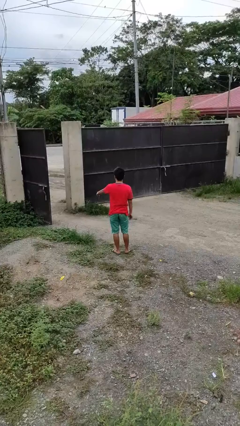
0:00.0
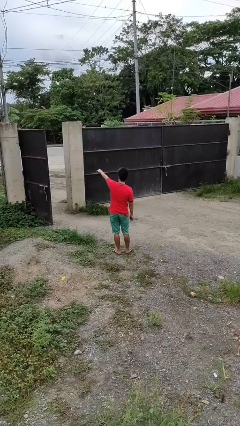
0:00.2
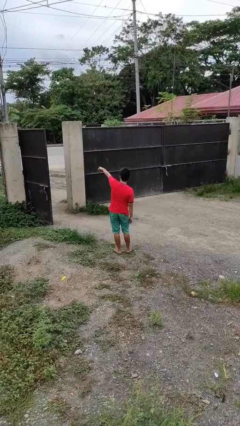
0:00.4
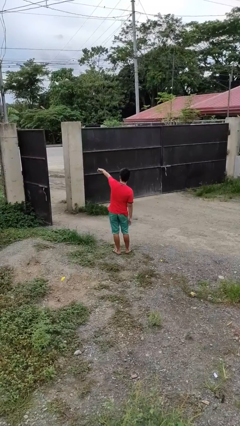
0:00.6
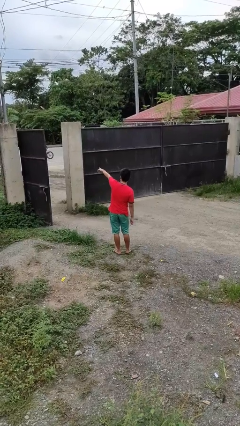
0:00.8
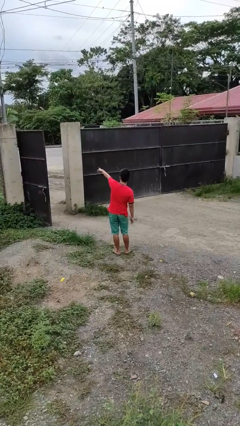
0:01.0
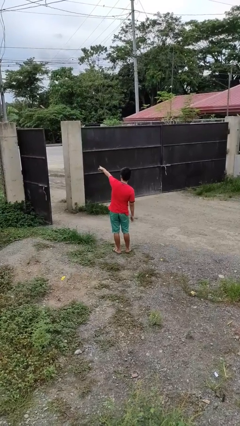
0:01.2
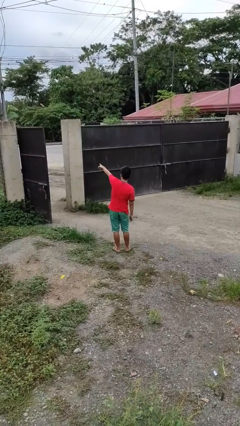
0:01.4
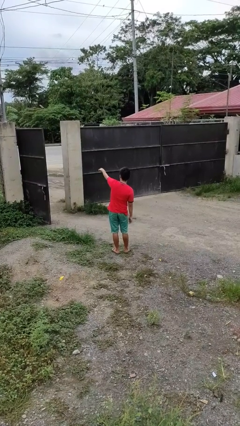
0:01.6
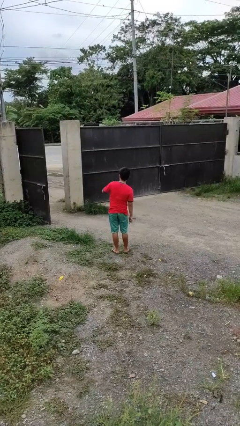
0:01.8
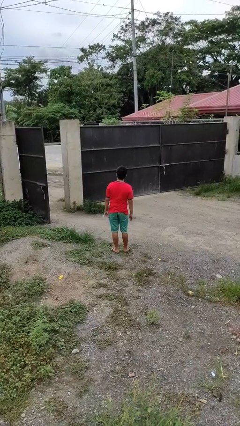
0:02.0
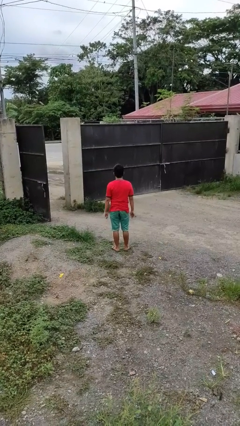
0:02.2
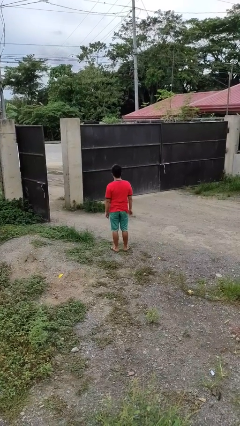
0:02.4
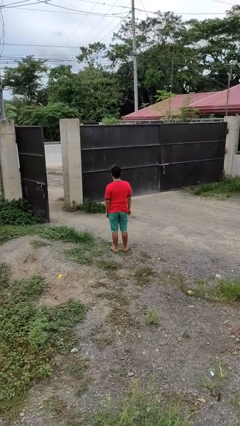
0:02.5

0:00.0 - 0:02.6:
person points at person

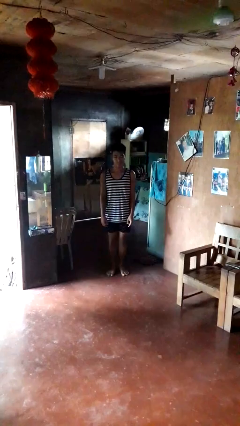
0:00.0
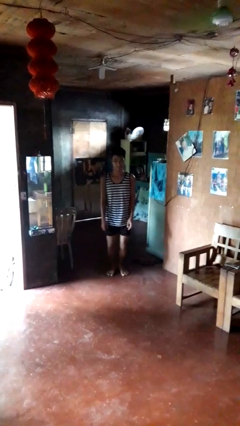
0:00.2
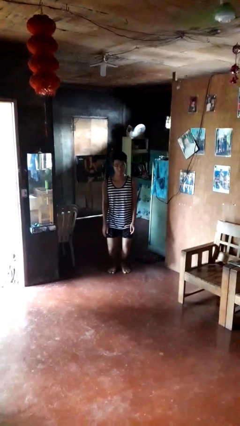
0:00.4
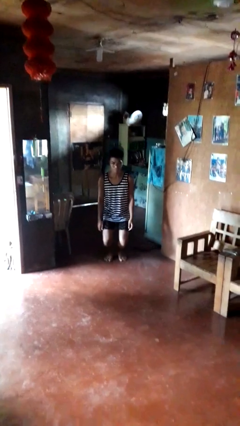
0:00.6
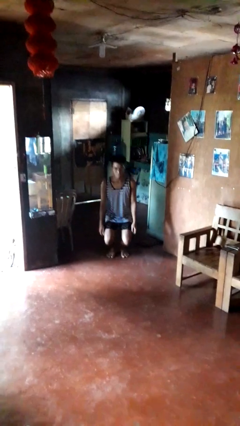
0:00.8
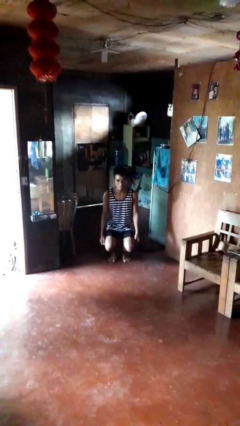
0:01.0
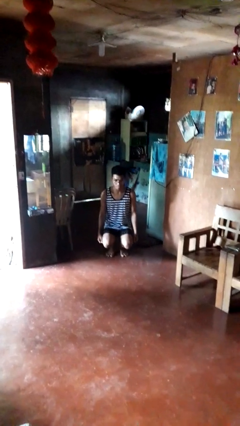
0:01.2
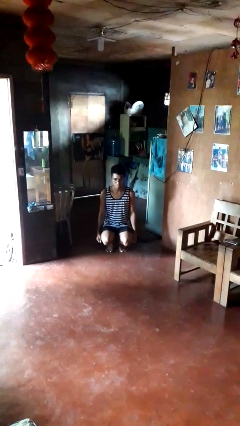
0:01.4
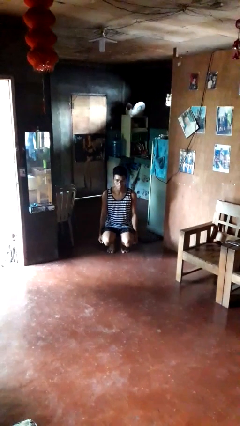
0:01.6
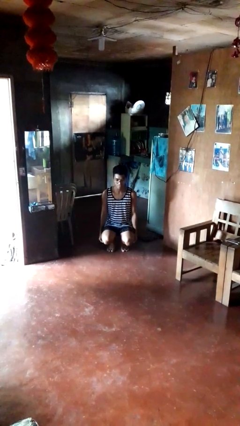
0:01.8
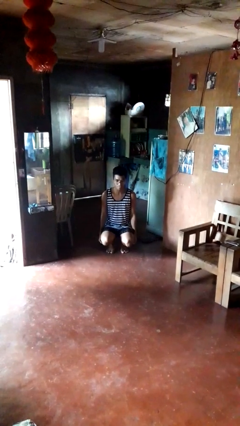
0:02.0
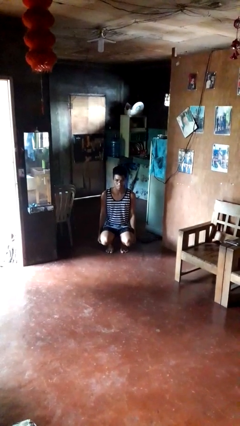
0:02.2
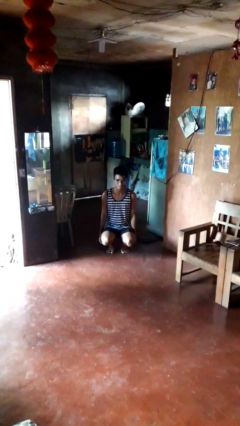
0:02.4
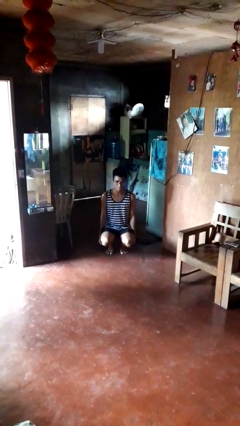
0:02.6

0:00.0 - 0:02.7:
person squats

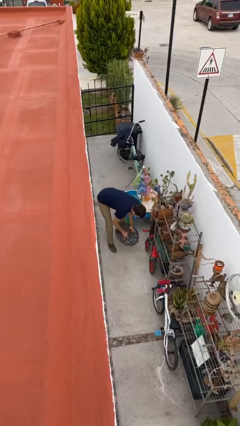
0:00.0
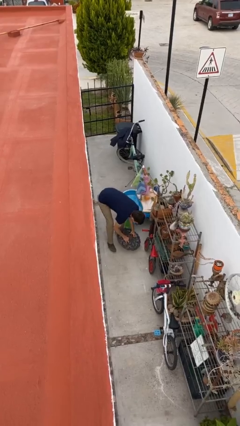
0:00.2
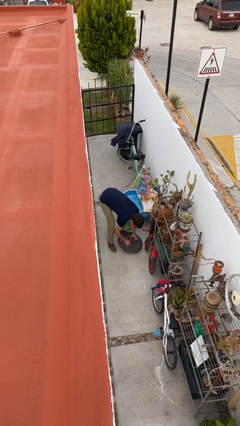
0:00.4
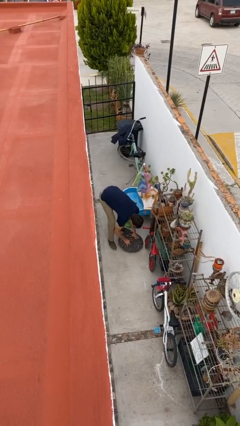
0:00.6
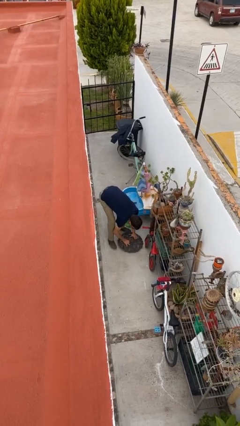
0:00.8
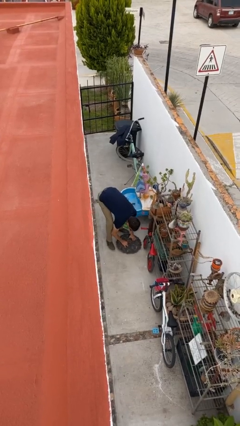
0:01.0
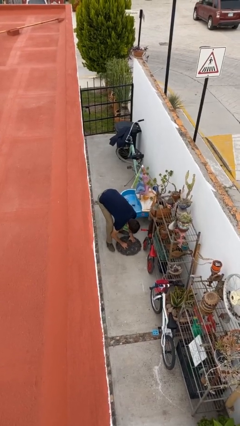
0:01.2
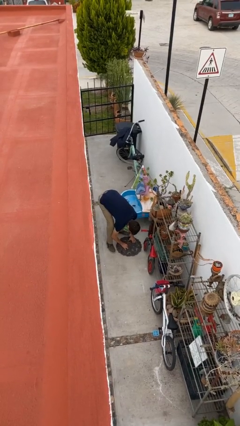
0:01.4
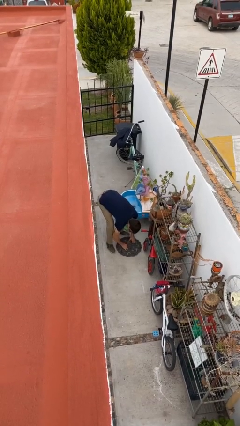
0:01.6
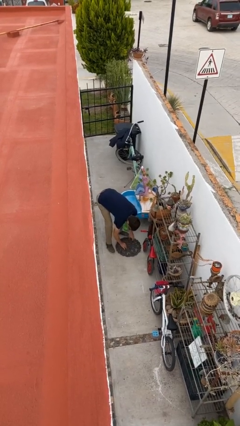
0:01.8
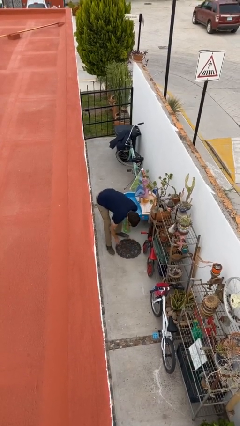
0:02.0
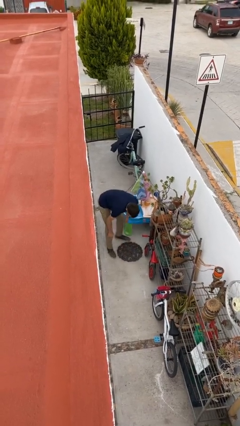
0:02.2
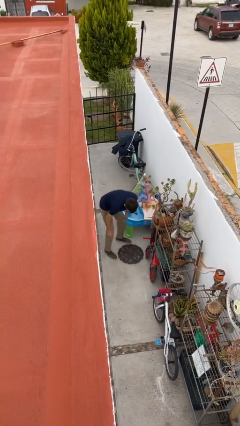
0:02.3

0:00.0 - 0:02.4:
person puts down object on floor

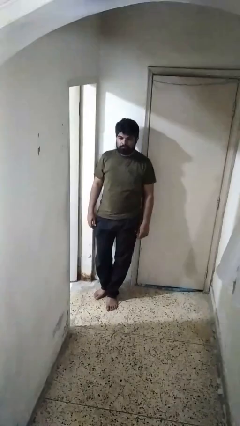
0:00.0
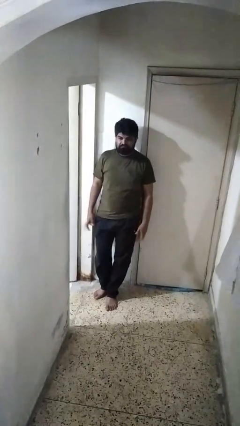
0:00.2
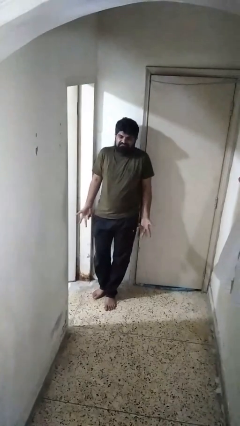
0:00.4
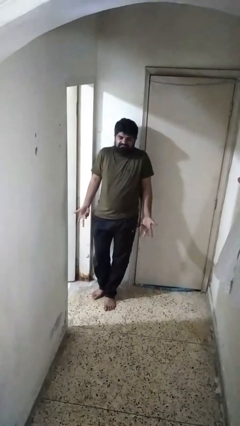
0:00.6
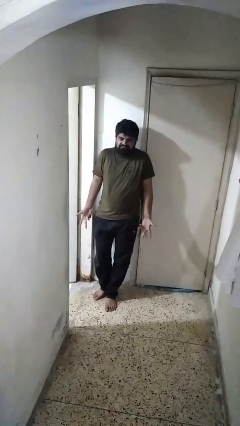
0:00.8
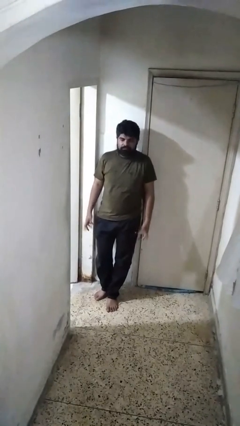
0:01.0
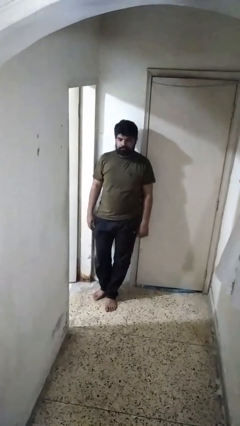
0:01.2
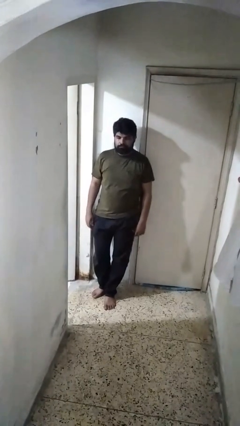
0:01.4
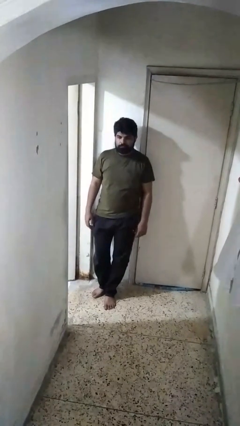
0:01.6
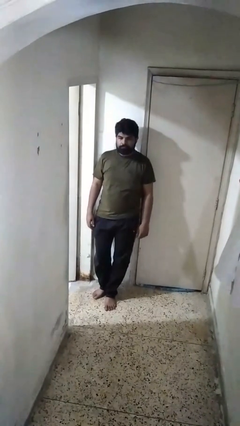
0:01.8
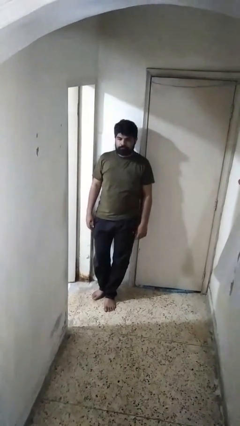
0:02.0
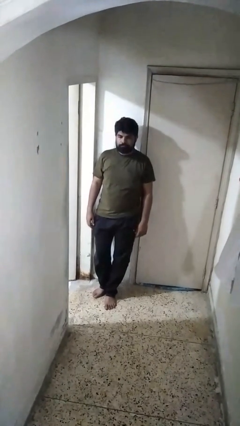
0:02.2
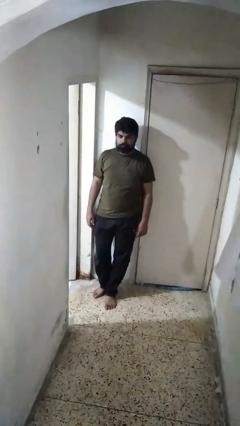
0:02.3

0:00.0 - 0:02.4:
person shrugs

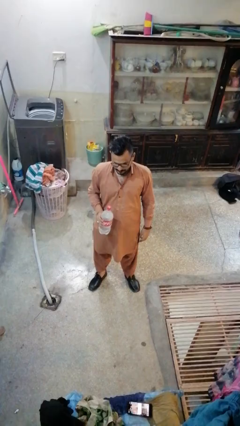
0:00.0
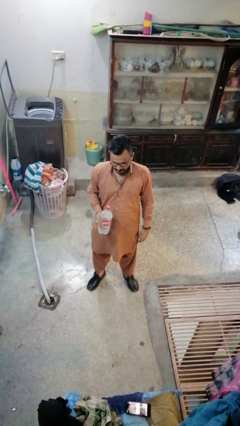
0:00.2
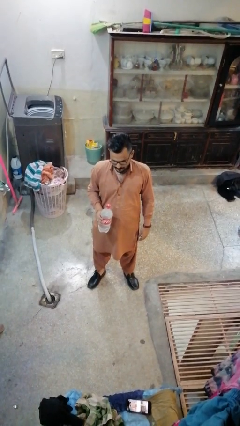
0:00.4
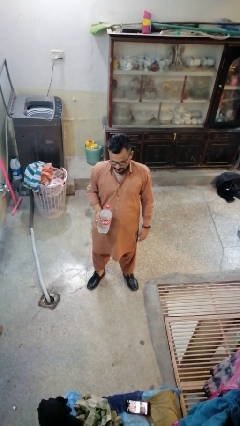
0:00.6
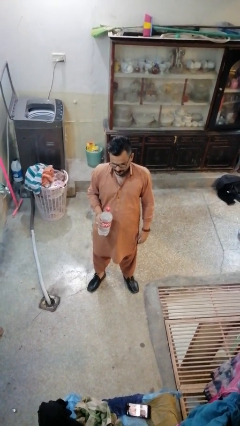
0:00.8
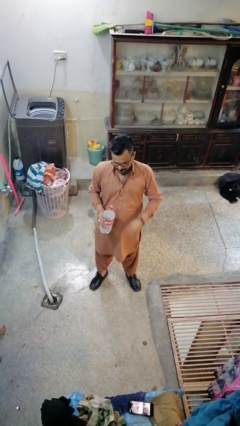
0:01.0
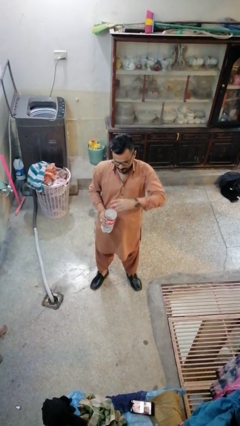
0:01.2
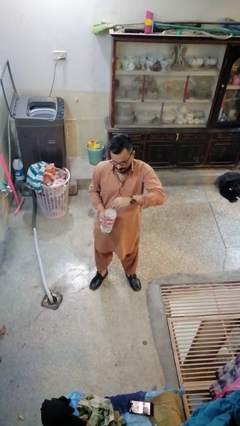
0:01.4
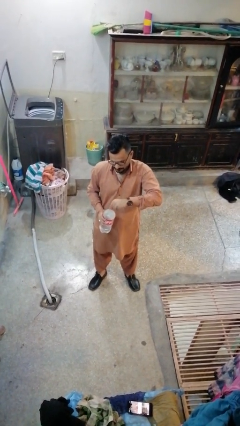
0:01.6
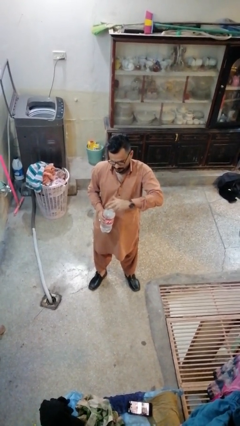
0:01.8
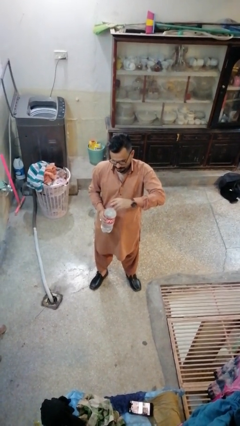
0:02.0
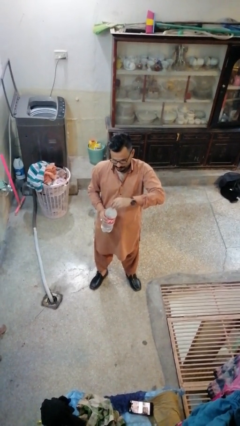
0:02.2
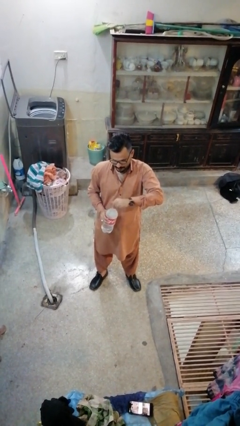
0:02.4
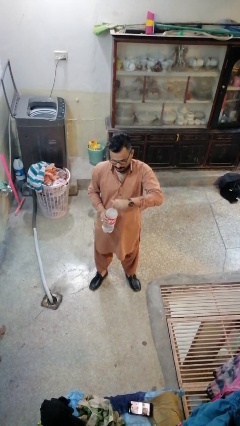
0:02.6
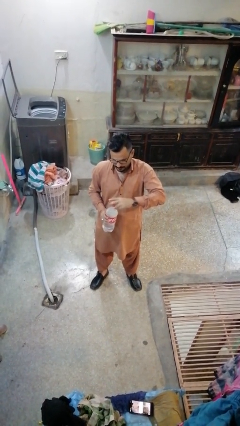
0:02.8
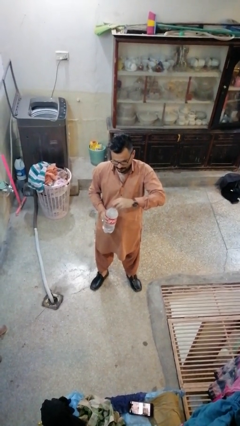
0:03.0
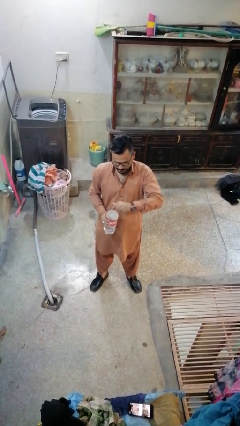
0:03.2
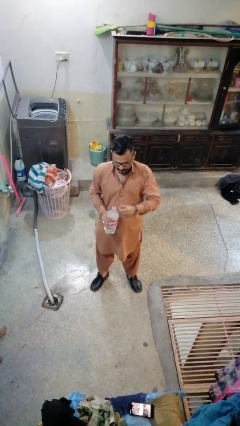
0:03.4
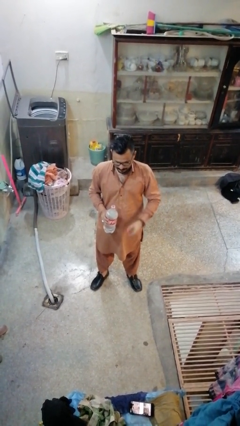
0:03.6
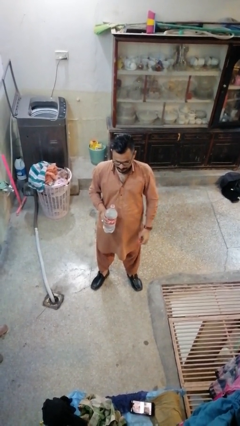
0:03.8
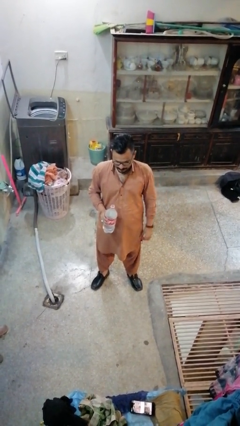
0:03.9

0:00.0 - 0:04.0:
person unscrews lid from bottle

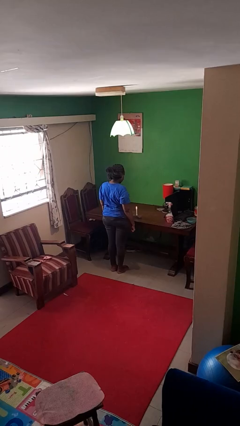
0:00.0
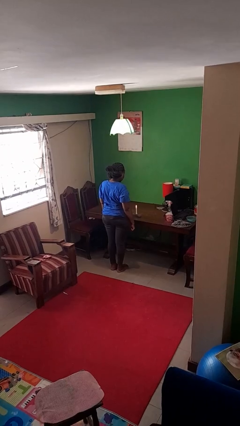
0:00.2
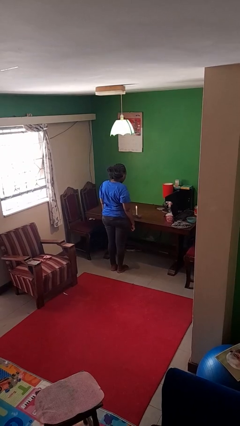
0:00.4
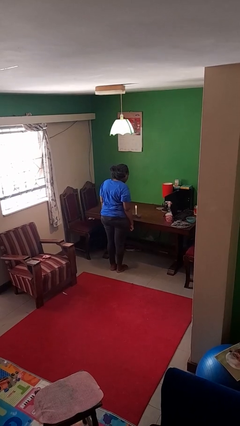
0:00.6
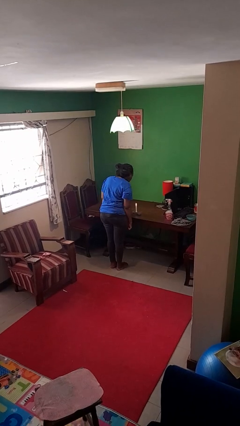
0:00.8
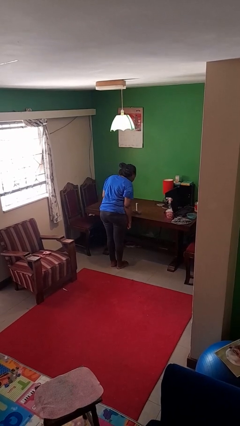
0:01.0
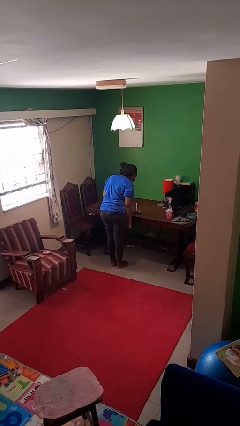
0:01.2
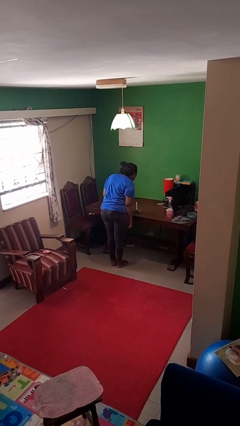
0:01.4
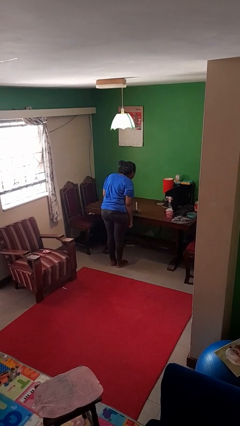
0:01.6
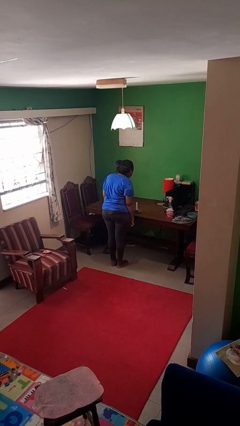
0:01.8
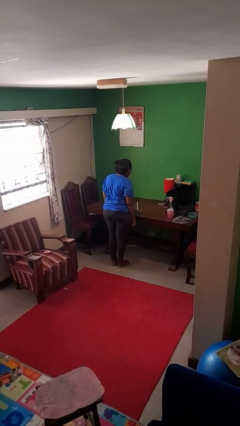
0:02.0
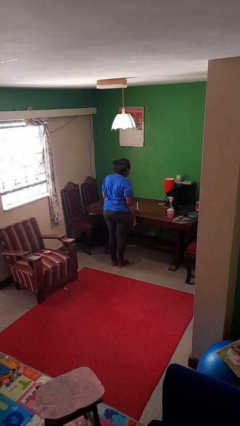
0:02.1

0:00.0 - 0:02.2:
person extinguishes candle

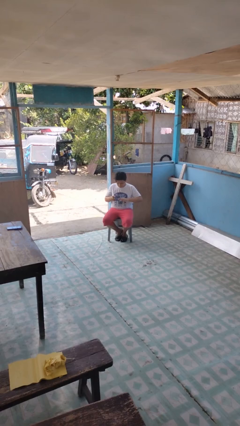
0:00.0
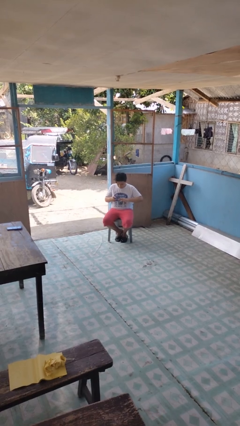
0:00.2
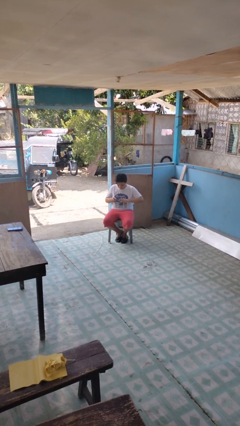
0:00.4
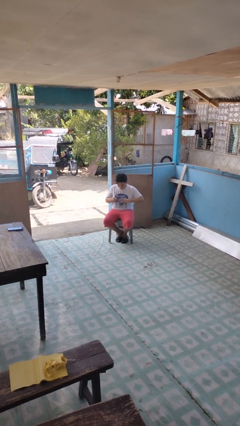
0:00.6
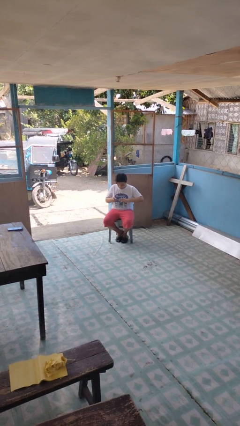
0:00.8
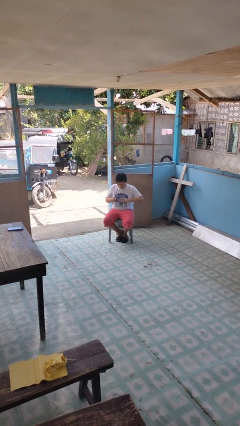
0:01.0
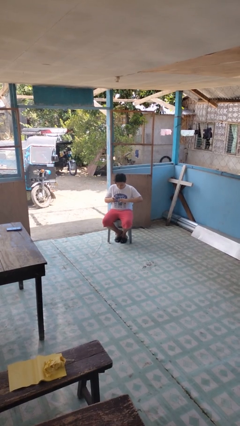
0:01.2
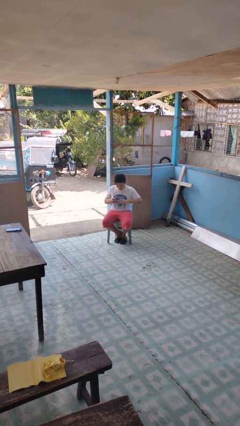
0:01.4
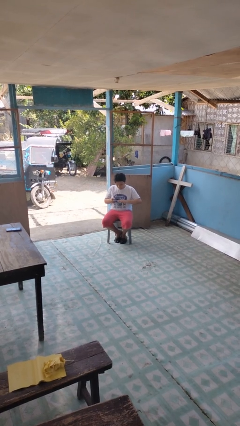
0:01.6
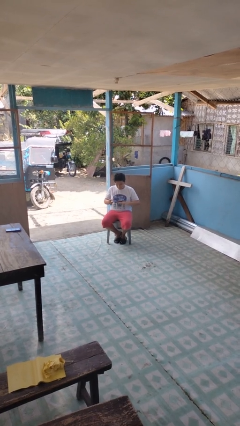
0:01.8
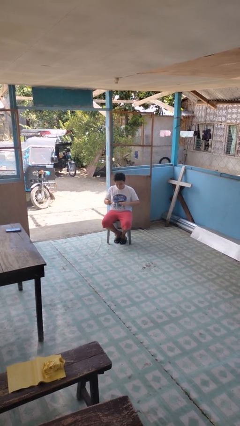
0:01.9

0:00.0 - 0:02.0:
person clips fingernails
